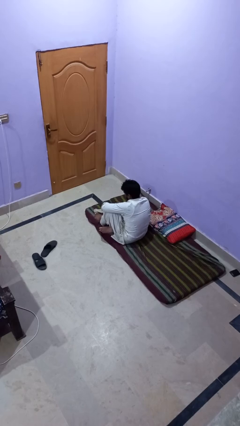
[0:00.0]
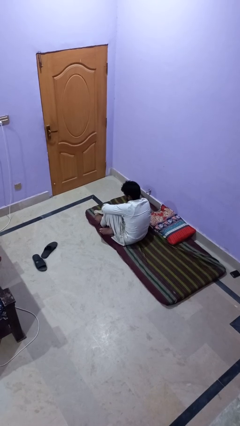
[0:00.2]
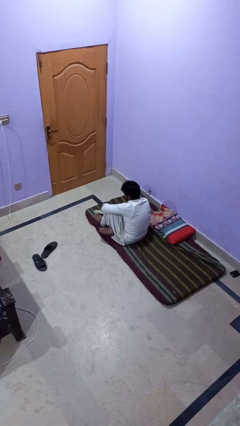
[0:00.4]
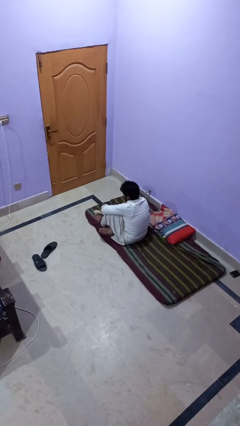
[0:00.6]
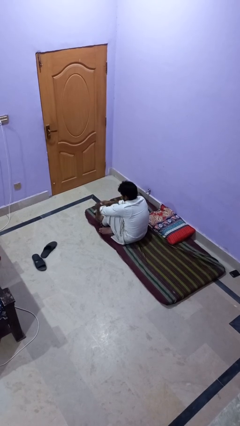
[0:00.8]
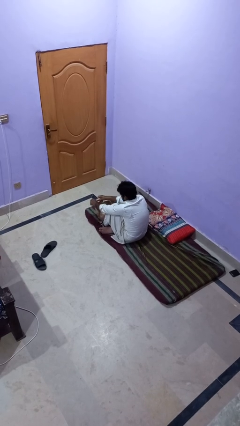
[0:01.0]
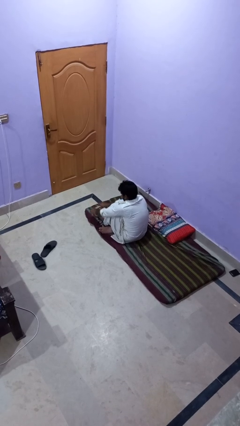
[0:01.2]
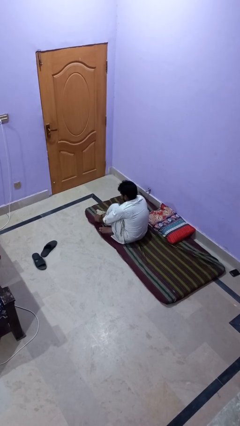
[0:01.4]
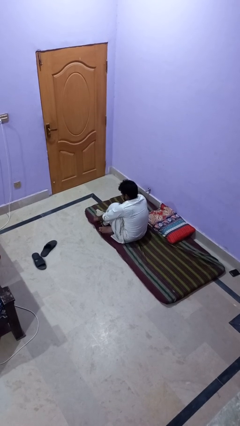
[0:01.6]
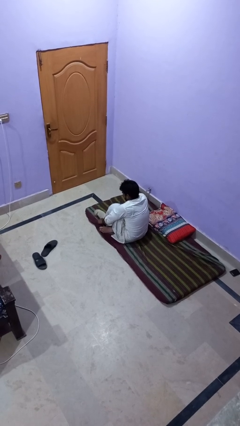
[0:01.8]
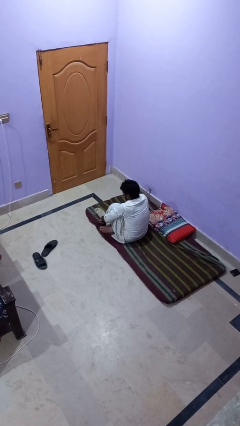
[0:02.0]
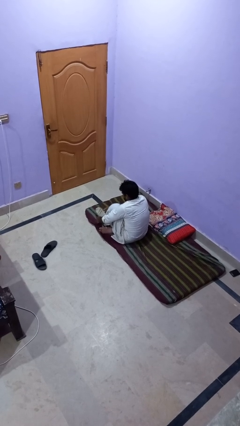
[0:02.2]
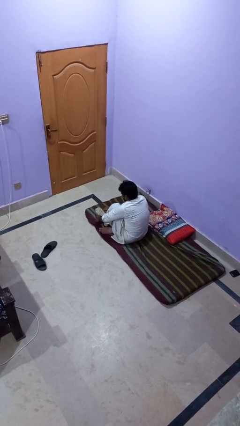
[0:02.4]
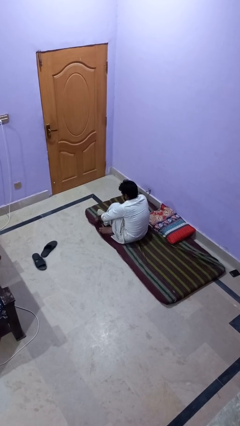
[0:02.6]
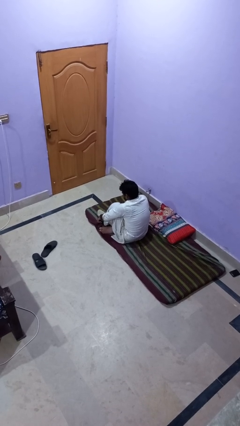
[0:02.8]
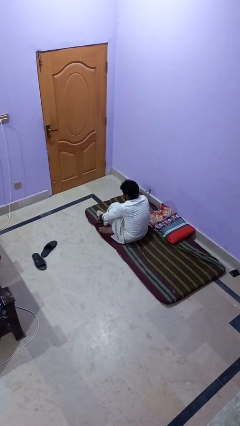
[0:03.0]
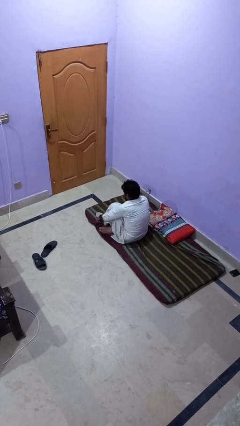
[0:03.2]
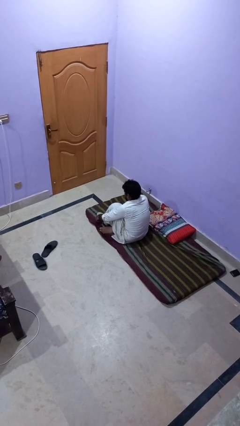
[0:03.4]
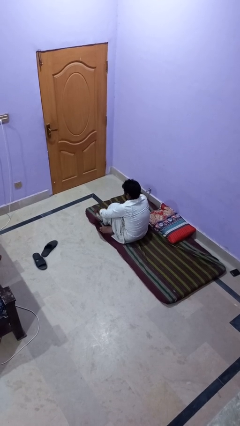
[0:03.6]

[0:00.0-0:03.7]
person puts on socks

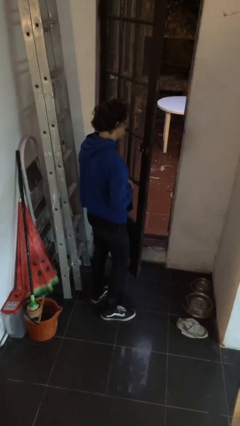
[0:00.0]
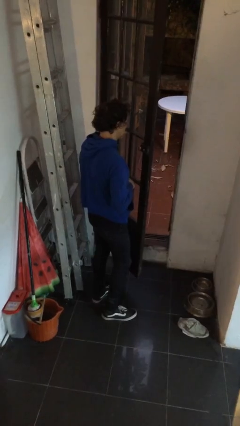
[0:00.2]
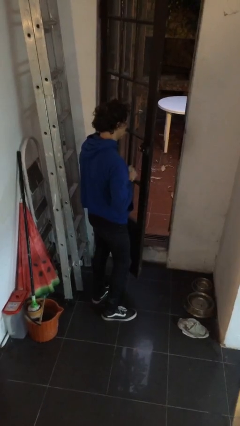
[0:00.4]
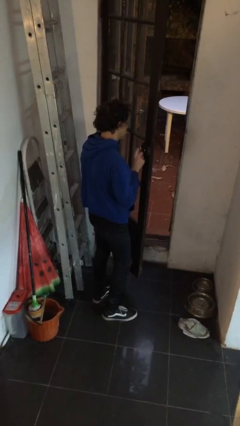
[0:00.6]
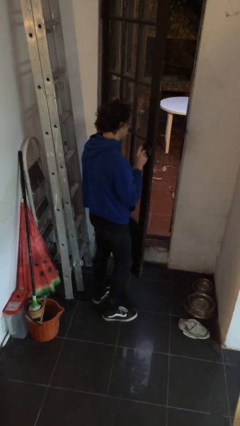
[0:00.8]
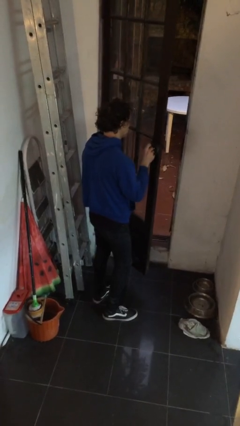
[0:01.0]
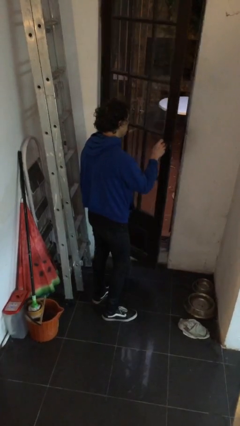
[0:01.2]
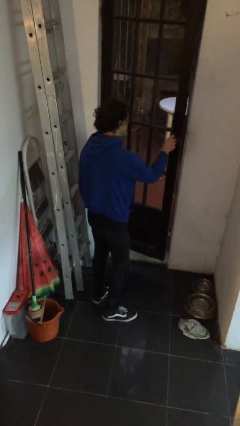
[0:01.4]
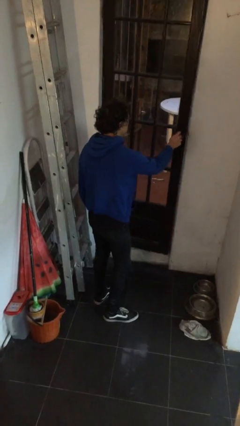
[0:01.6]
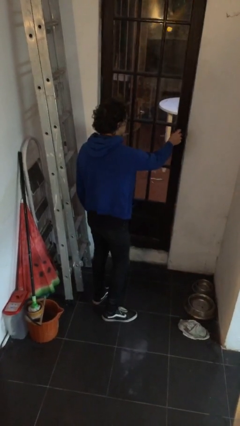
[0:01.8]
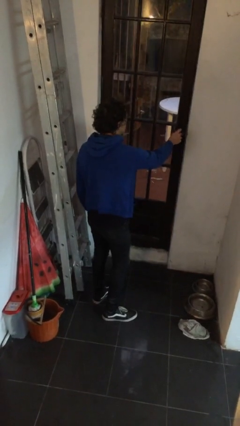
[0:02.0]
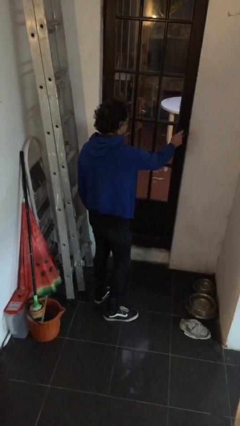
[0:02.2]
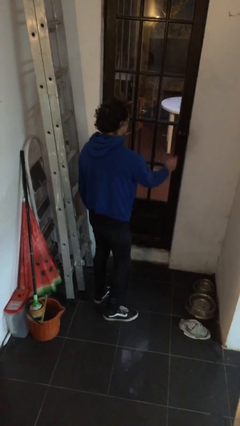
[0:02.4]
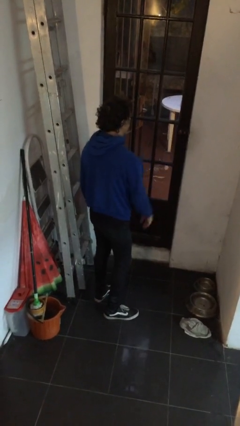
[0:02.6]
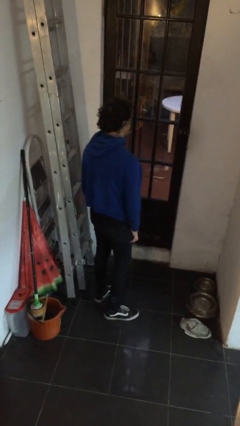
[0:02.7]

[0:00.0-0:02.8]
person closes facility door

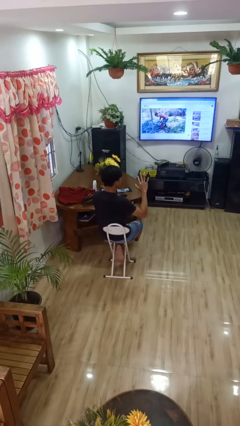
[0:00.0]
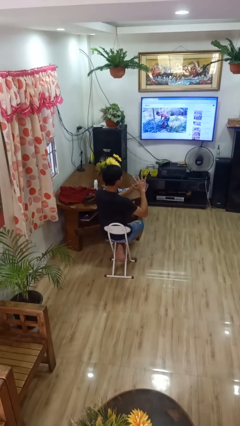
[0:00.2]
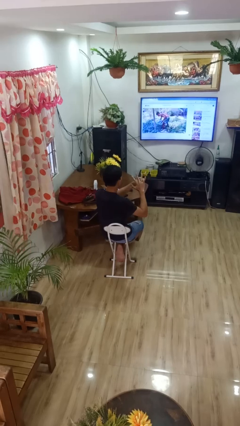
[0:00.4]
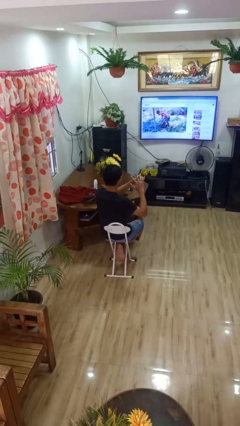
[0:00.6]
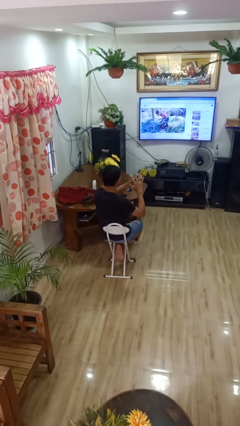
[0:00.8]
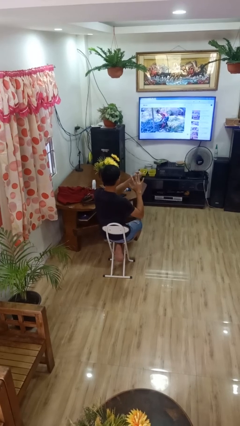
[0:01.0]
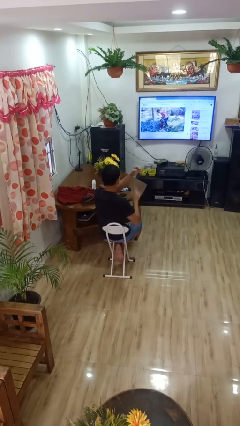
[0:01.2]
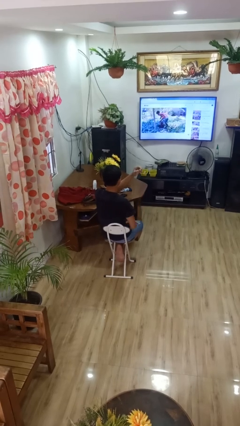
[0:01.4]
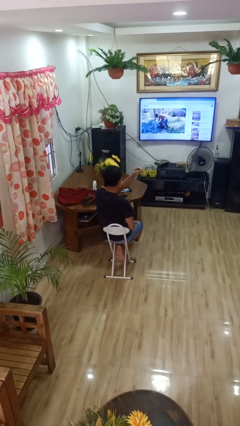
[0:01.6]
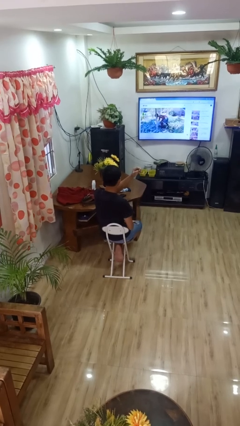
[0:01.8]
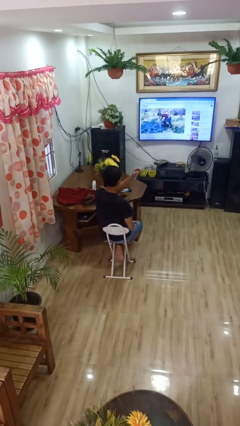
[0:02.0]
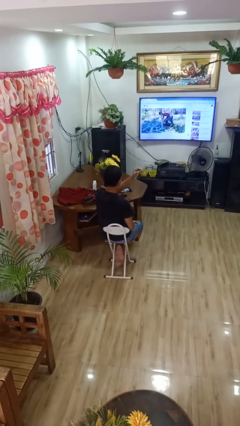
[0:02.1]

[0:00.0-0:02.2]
person takes off ring

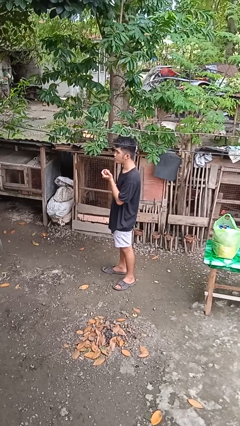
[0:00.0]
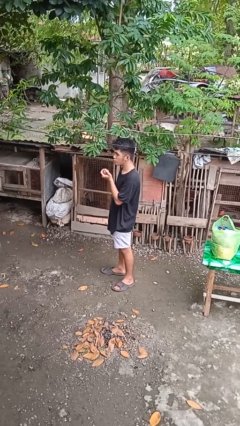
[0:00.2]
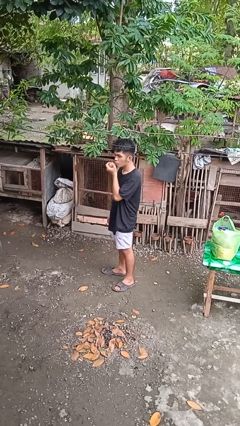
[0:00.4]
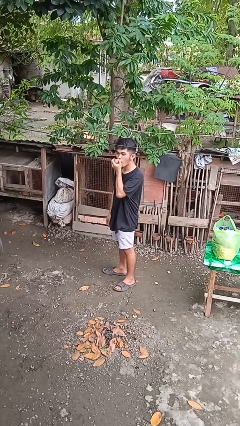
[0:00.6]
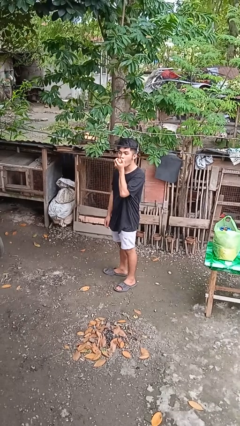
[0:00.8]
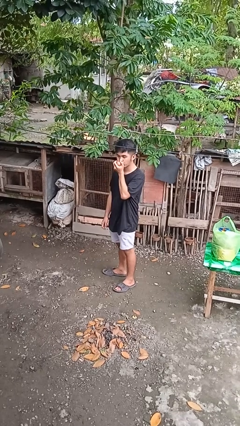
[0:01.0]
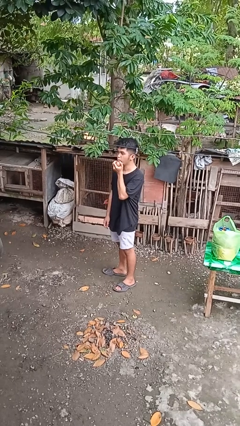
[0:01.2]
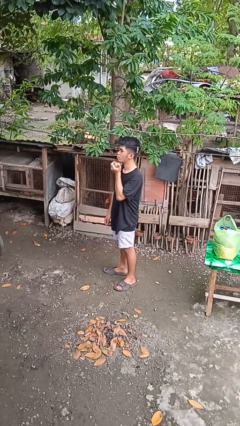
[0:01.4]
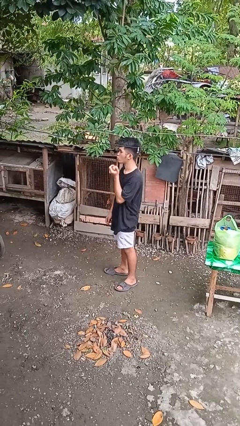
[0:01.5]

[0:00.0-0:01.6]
person eats apple

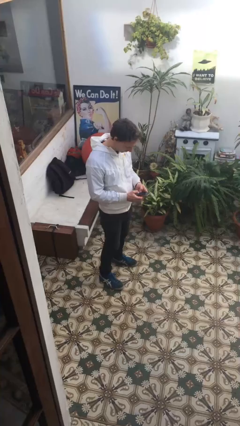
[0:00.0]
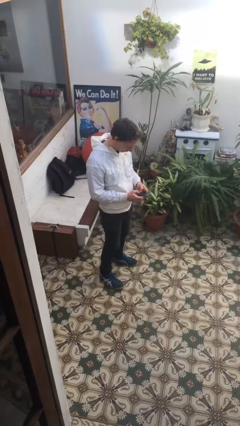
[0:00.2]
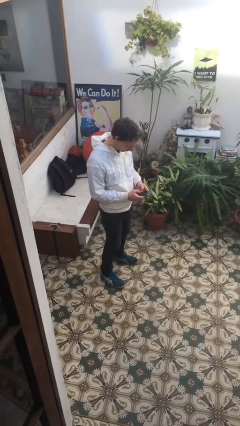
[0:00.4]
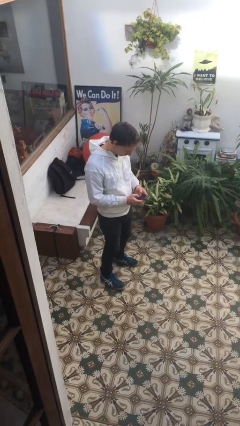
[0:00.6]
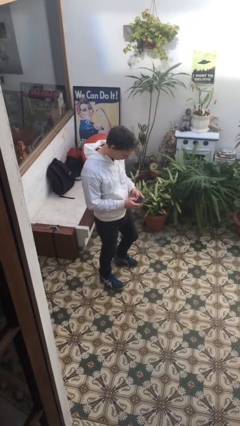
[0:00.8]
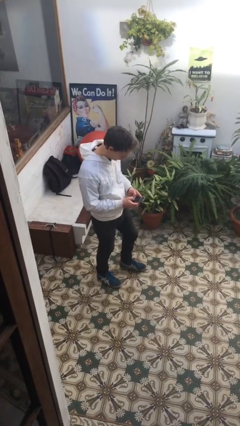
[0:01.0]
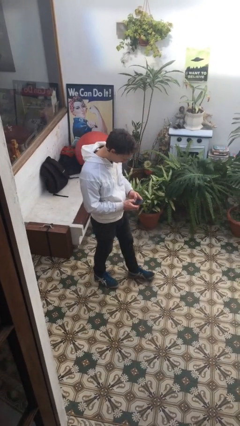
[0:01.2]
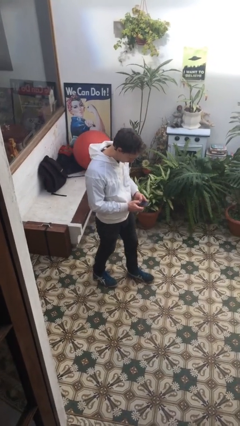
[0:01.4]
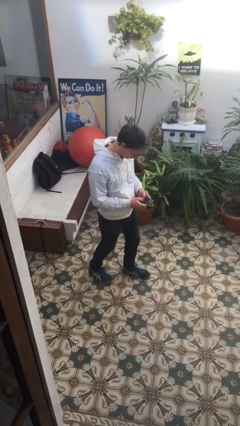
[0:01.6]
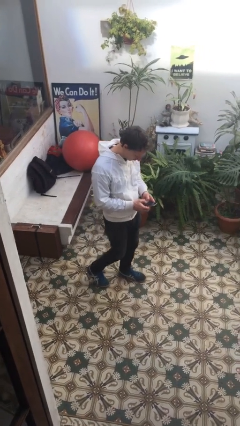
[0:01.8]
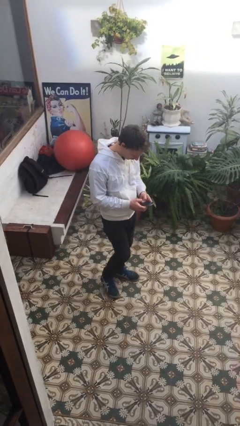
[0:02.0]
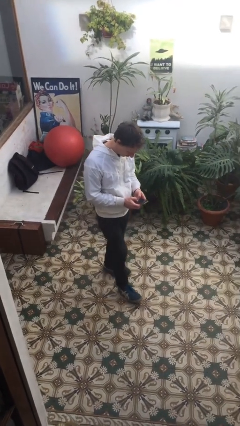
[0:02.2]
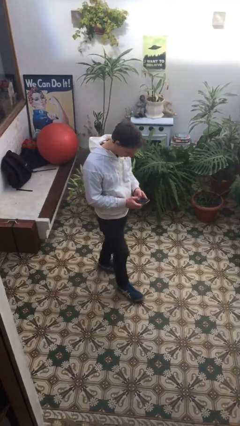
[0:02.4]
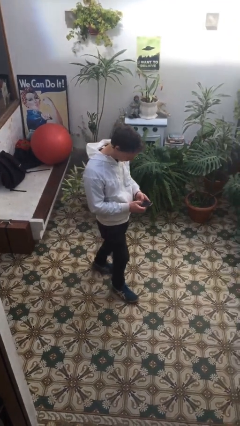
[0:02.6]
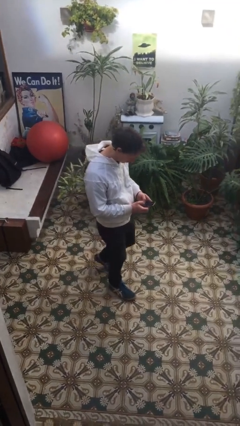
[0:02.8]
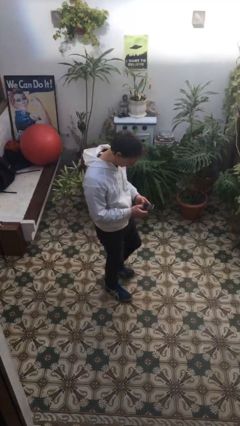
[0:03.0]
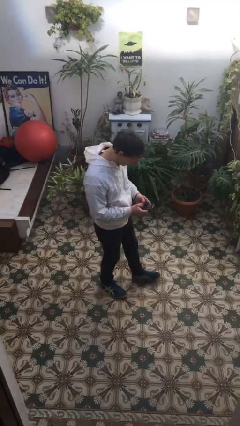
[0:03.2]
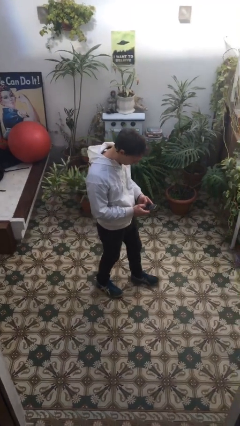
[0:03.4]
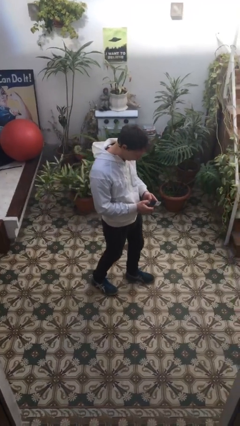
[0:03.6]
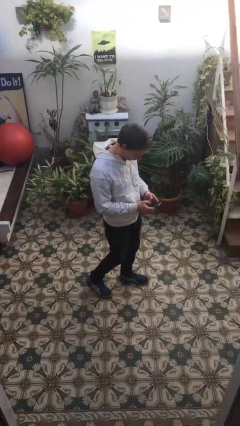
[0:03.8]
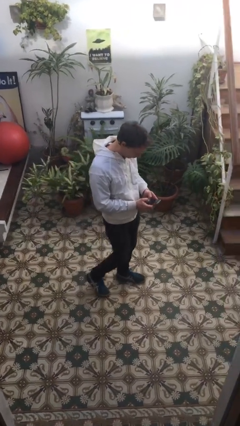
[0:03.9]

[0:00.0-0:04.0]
person texts on phone

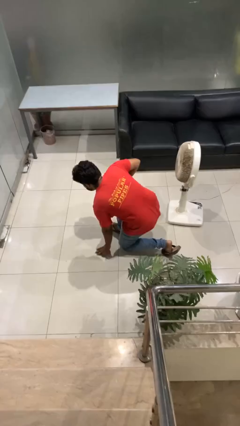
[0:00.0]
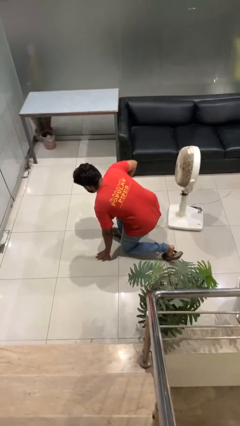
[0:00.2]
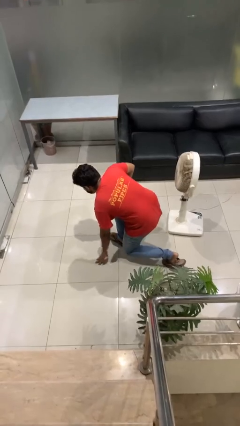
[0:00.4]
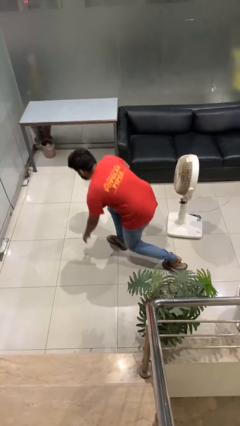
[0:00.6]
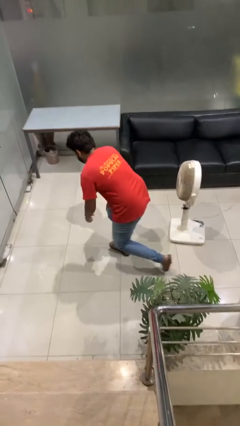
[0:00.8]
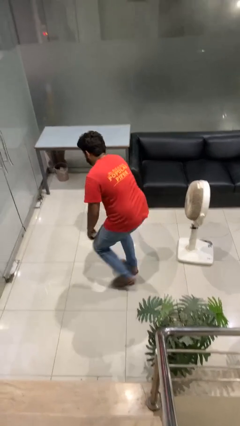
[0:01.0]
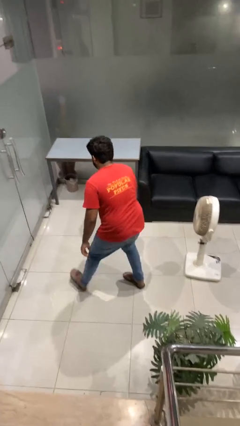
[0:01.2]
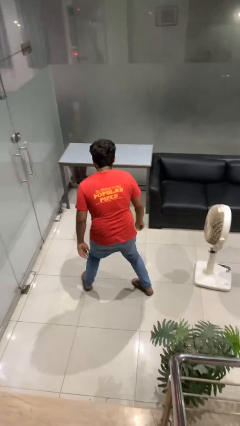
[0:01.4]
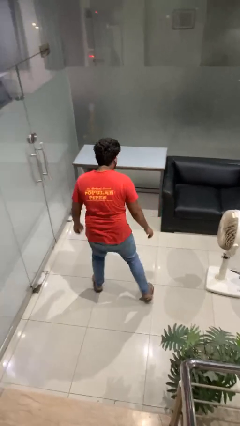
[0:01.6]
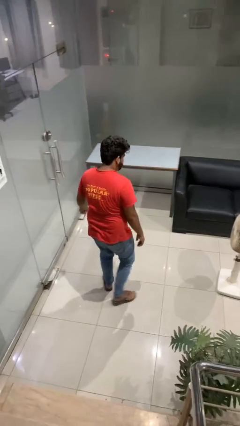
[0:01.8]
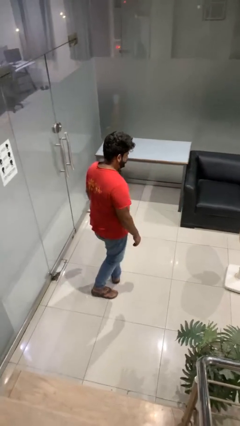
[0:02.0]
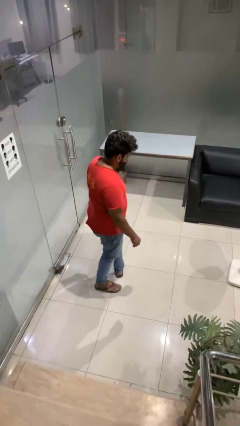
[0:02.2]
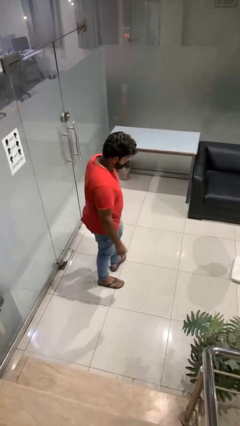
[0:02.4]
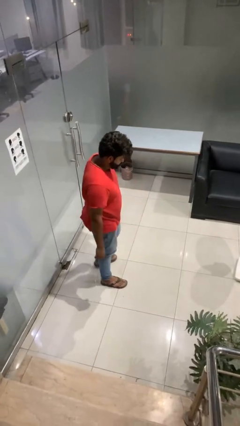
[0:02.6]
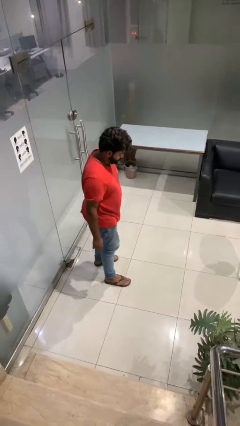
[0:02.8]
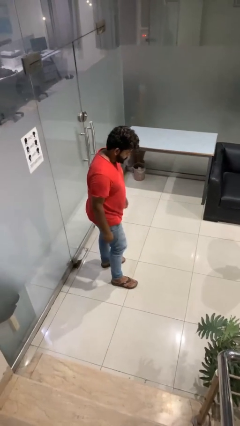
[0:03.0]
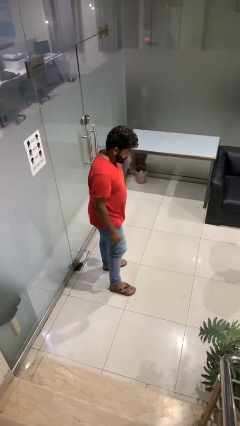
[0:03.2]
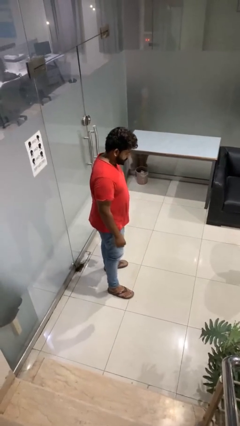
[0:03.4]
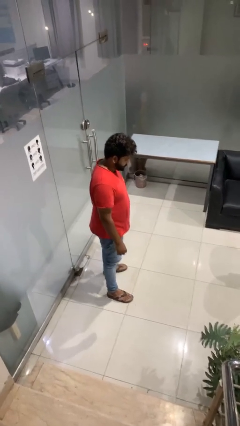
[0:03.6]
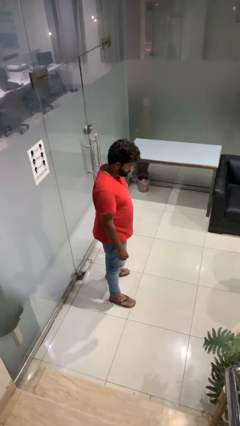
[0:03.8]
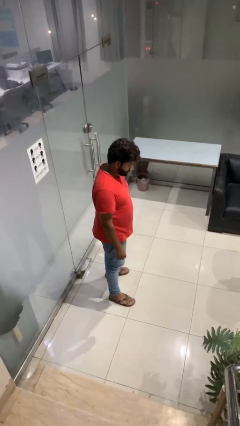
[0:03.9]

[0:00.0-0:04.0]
person stands up from floor
